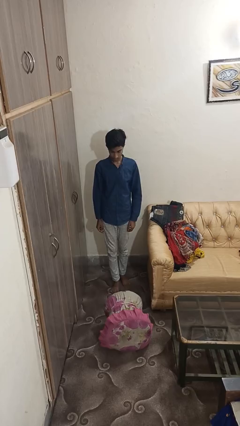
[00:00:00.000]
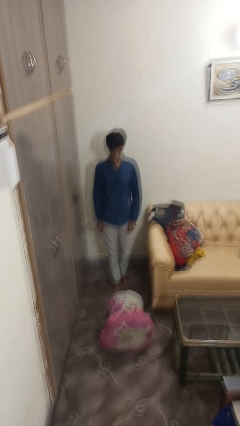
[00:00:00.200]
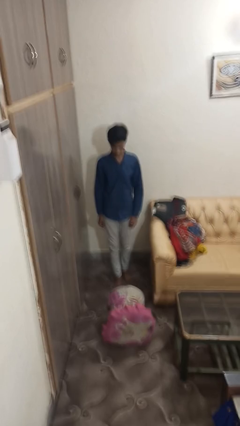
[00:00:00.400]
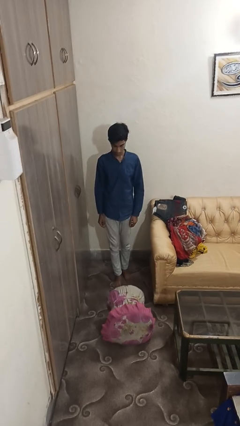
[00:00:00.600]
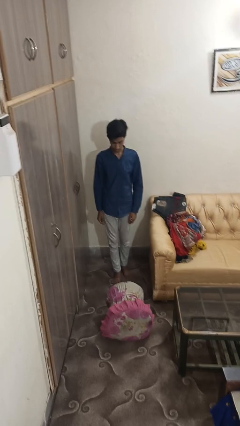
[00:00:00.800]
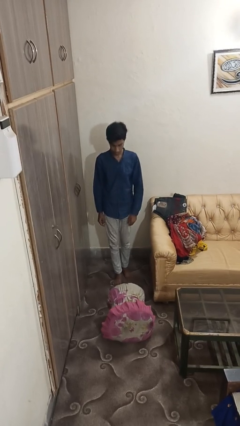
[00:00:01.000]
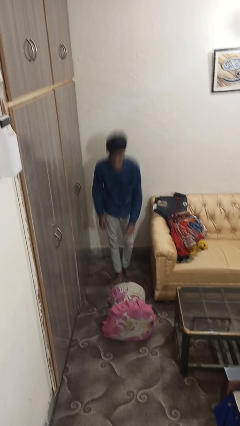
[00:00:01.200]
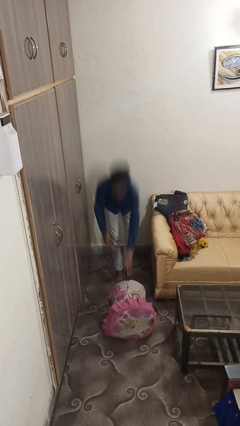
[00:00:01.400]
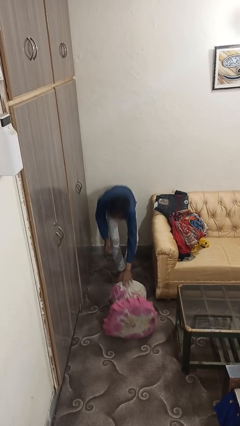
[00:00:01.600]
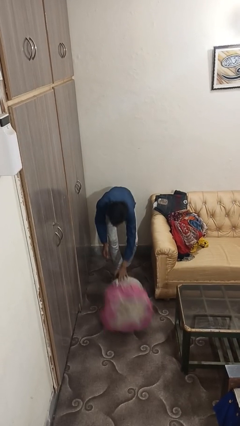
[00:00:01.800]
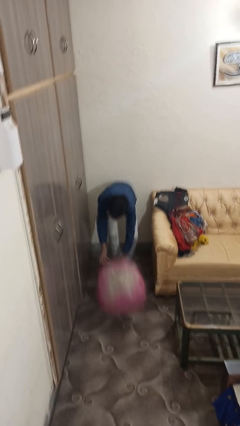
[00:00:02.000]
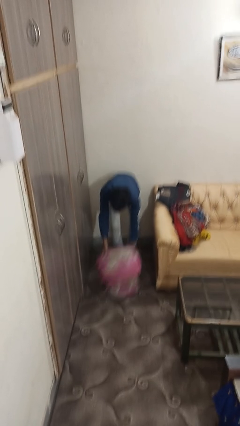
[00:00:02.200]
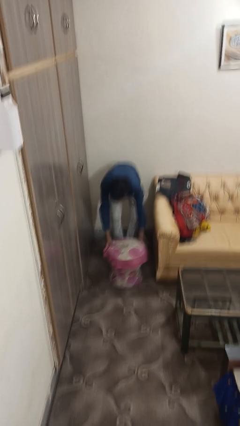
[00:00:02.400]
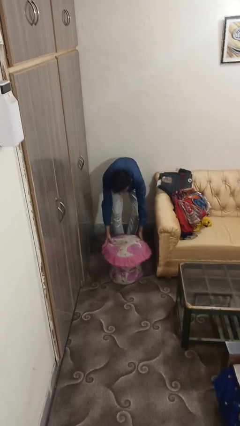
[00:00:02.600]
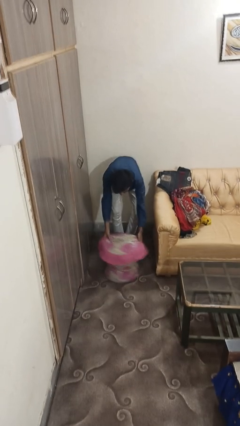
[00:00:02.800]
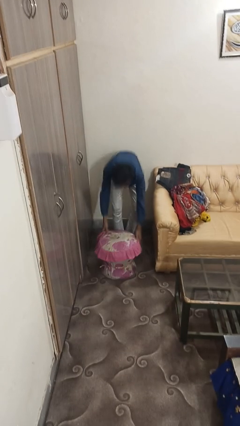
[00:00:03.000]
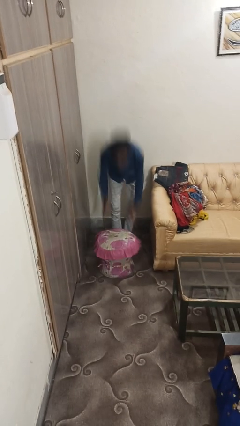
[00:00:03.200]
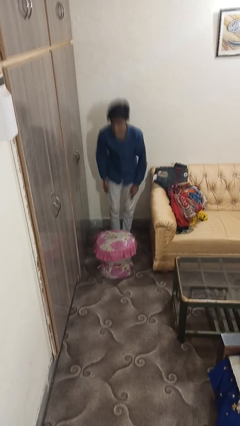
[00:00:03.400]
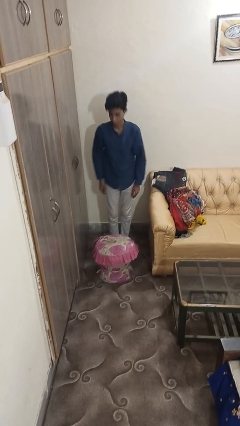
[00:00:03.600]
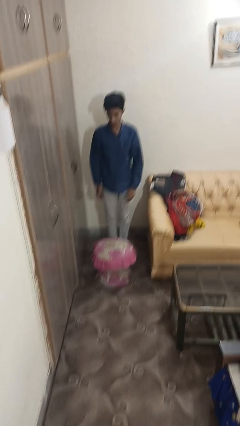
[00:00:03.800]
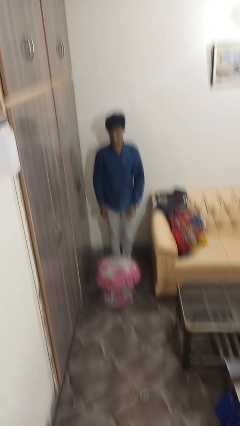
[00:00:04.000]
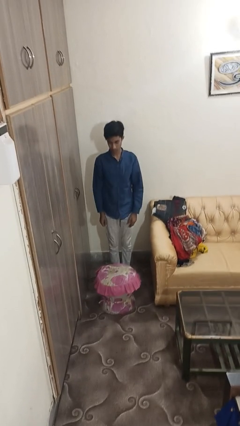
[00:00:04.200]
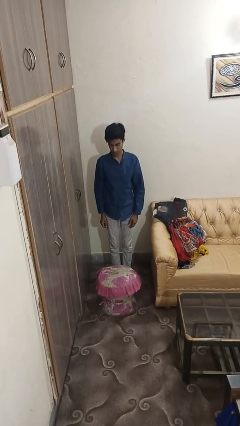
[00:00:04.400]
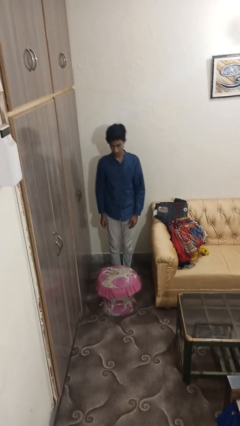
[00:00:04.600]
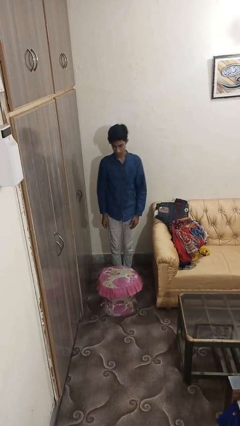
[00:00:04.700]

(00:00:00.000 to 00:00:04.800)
person sets upright furniture

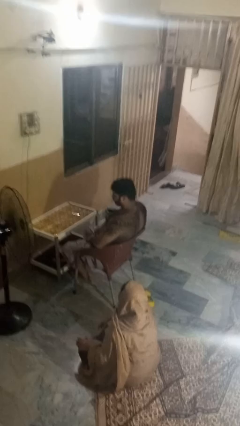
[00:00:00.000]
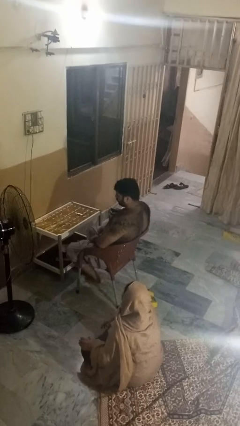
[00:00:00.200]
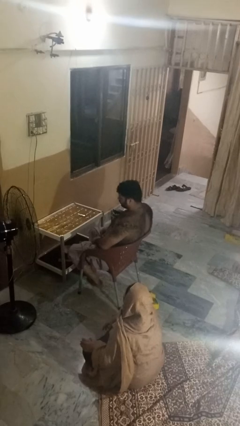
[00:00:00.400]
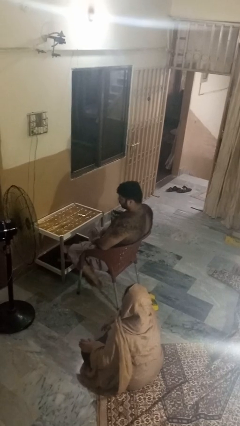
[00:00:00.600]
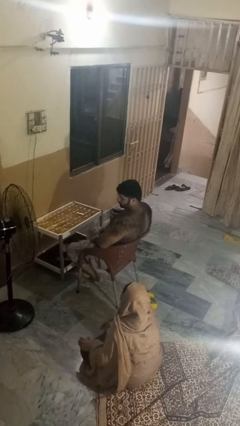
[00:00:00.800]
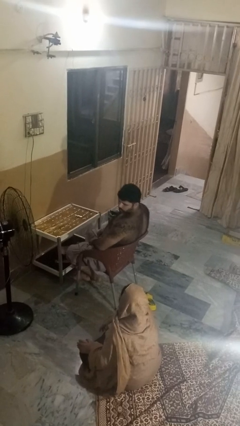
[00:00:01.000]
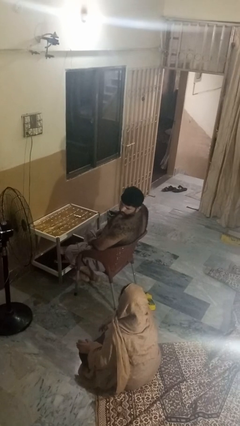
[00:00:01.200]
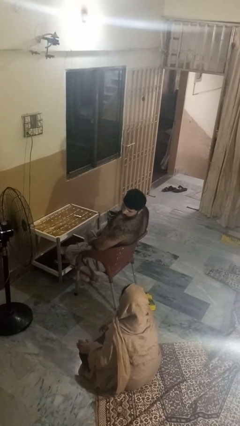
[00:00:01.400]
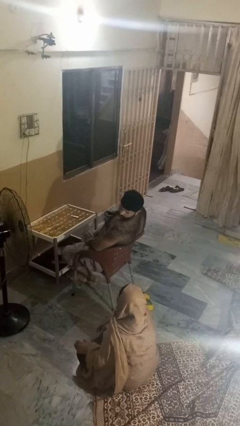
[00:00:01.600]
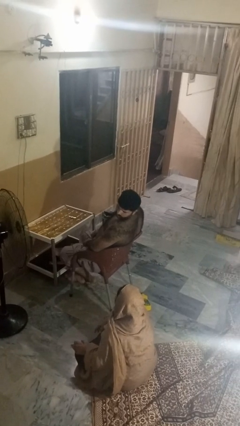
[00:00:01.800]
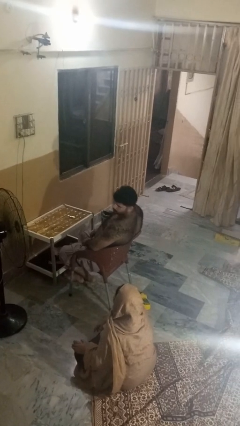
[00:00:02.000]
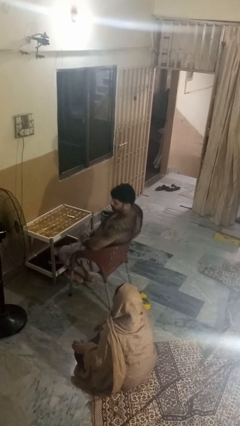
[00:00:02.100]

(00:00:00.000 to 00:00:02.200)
person looks over shoulder

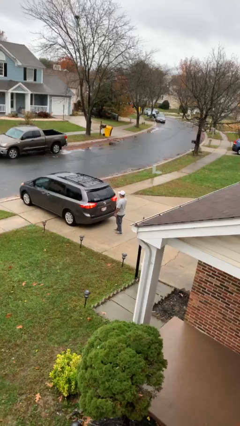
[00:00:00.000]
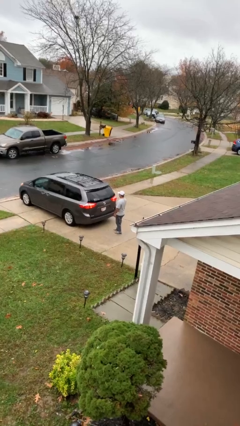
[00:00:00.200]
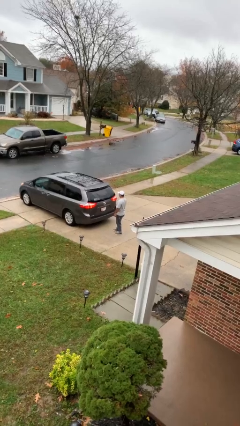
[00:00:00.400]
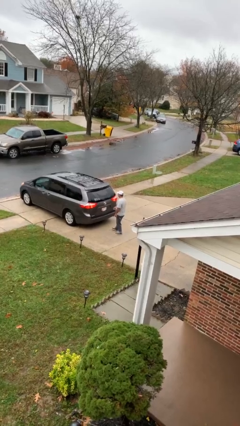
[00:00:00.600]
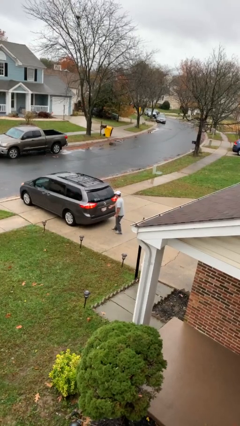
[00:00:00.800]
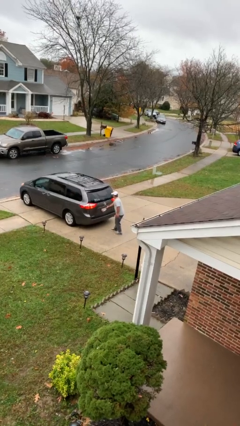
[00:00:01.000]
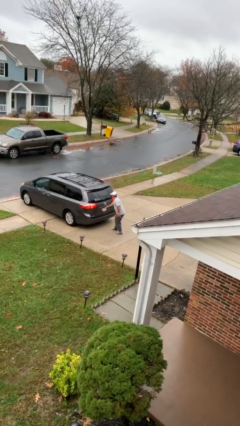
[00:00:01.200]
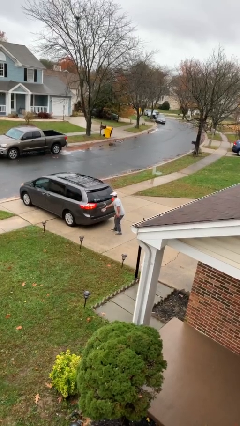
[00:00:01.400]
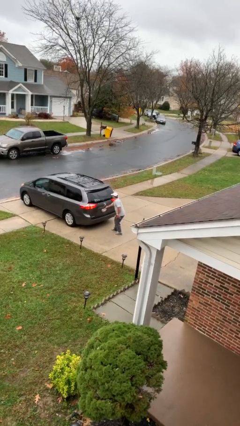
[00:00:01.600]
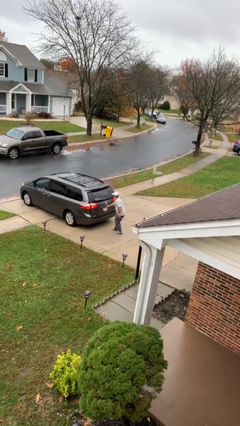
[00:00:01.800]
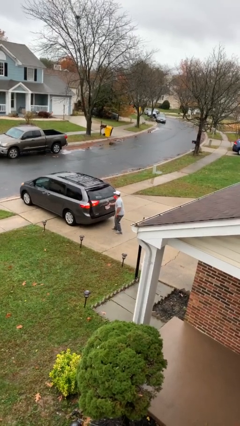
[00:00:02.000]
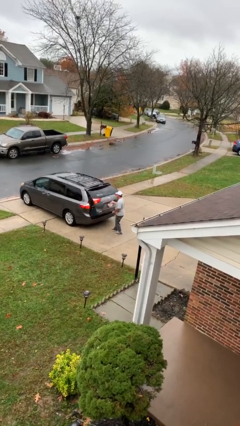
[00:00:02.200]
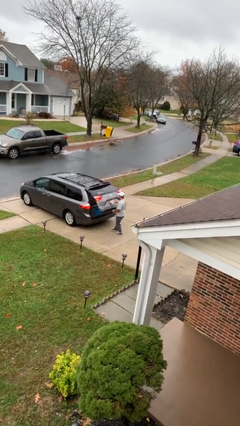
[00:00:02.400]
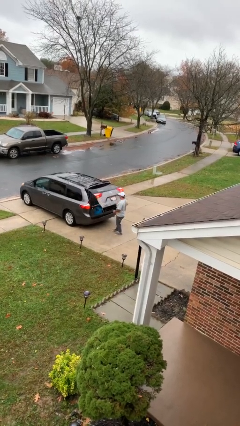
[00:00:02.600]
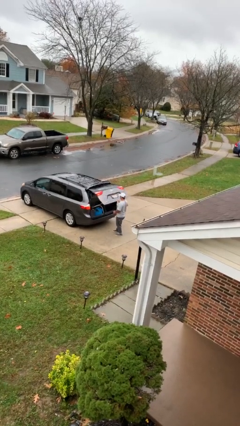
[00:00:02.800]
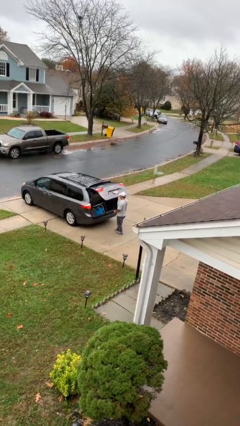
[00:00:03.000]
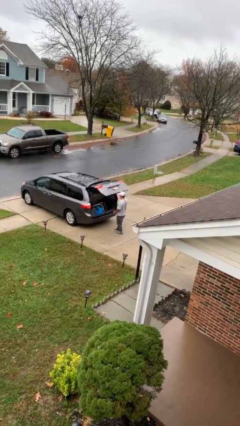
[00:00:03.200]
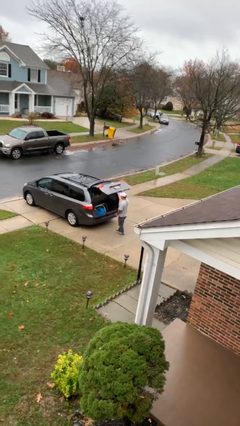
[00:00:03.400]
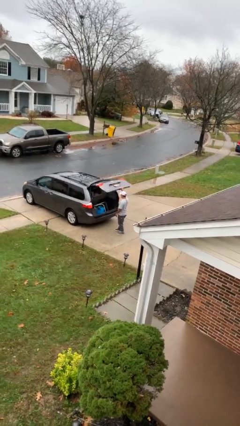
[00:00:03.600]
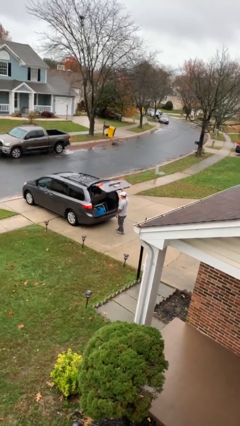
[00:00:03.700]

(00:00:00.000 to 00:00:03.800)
person opens car trunk

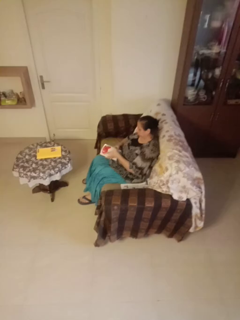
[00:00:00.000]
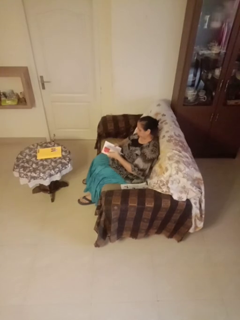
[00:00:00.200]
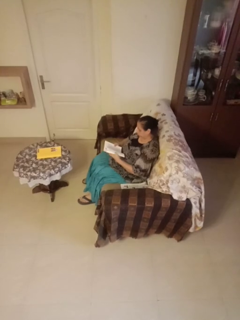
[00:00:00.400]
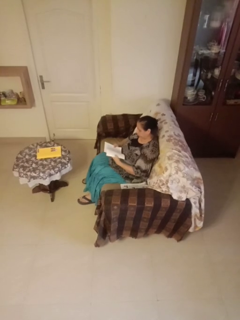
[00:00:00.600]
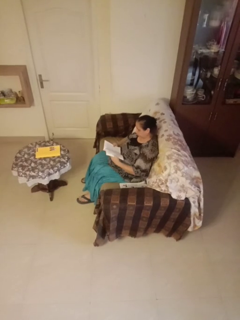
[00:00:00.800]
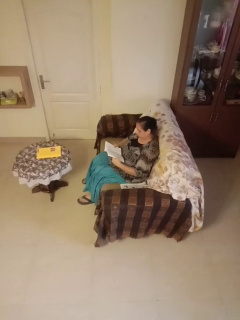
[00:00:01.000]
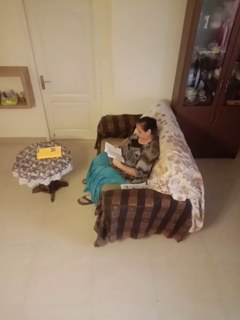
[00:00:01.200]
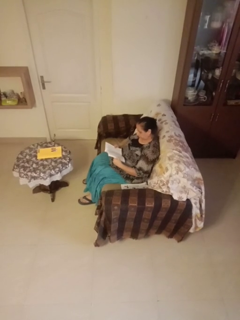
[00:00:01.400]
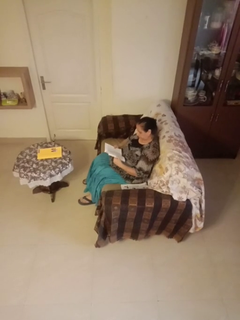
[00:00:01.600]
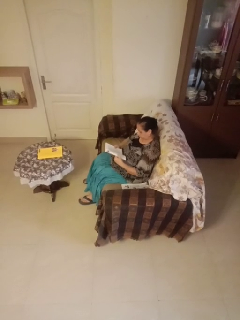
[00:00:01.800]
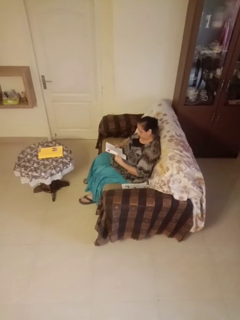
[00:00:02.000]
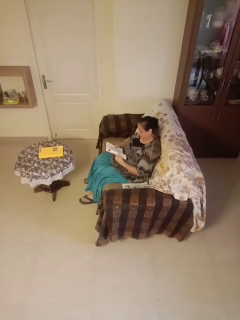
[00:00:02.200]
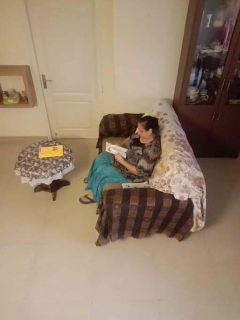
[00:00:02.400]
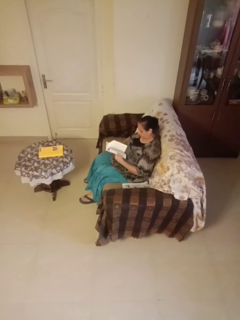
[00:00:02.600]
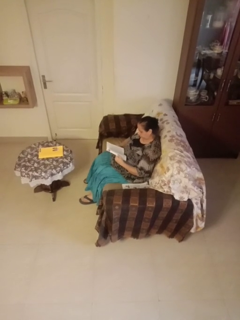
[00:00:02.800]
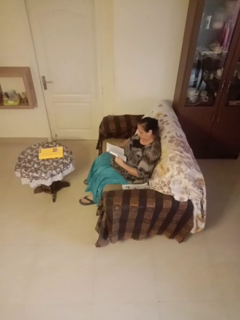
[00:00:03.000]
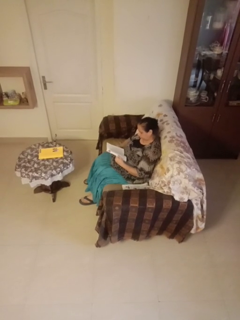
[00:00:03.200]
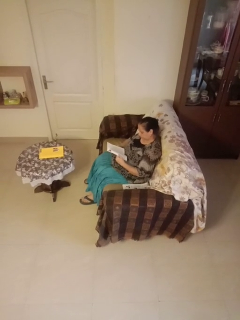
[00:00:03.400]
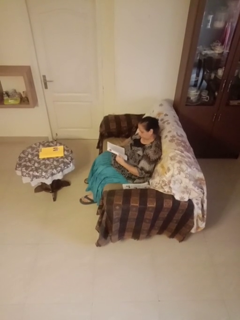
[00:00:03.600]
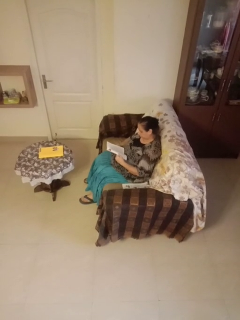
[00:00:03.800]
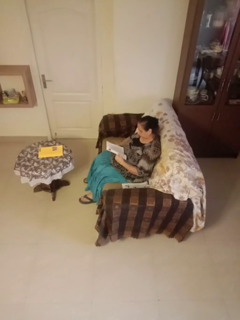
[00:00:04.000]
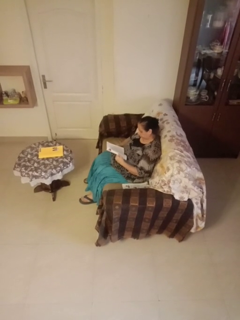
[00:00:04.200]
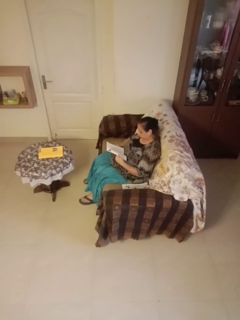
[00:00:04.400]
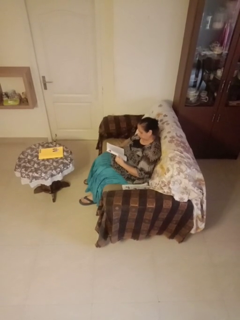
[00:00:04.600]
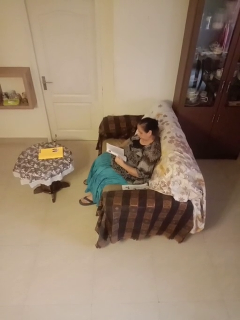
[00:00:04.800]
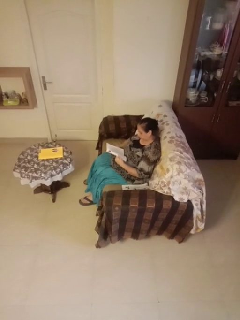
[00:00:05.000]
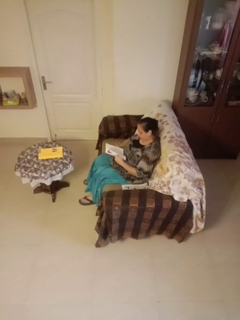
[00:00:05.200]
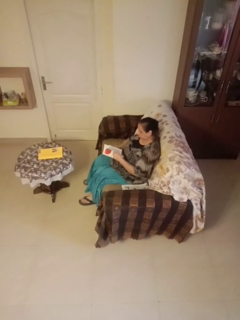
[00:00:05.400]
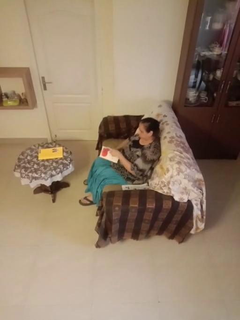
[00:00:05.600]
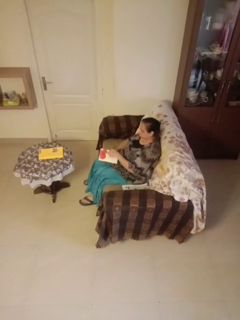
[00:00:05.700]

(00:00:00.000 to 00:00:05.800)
person reads book

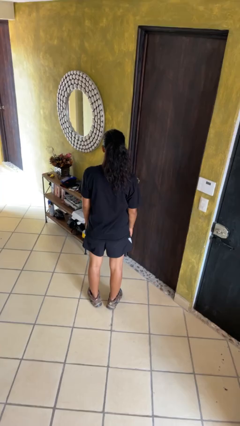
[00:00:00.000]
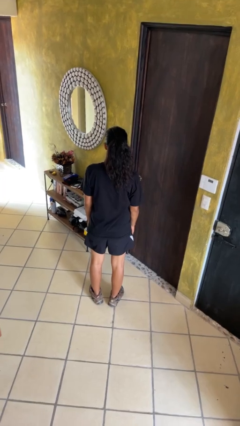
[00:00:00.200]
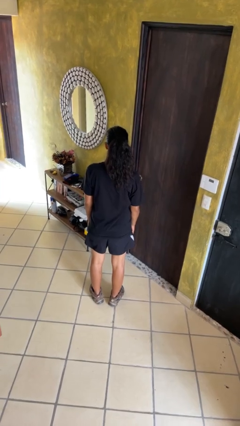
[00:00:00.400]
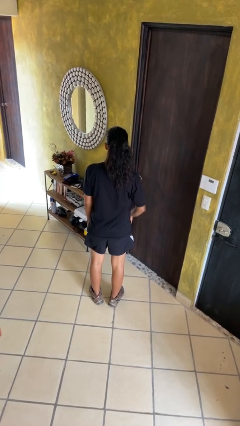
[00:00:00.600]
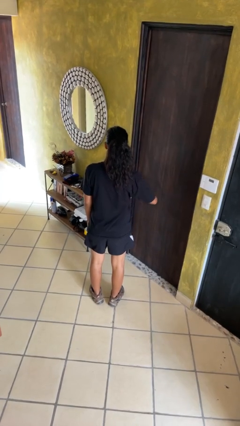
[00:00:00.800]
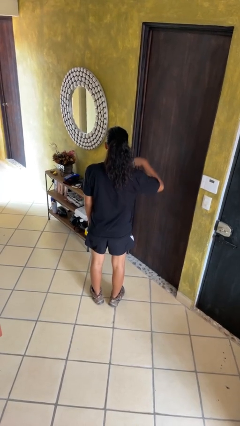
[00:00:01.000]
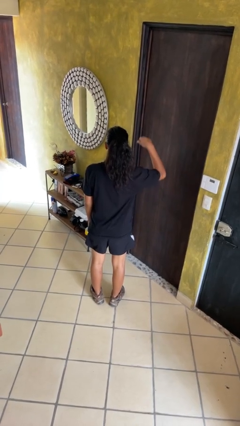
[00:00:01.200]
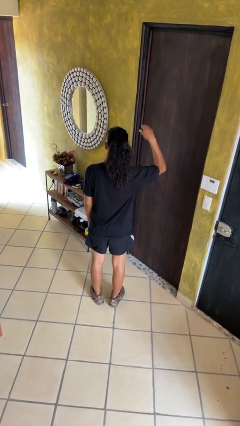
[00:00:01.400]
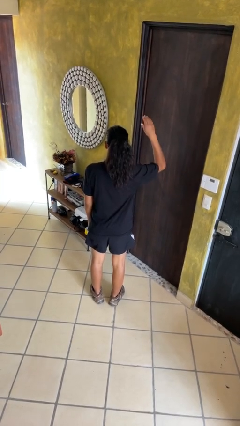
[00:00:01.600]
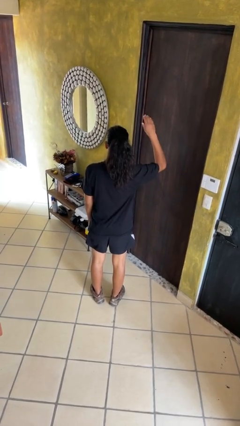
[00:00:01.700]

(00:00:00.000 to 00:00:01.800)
person gestures swipe up

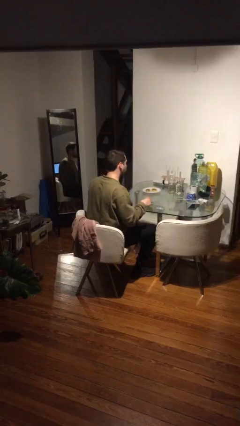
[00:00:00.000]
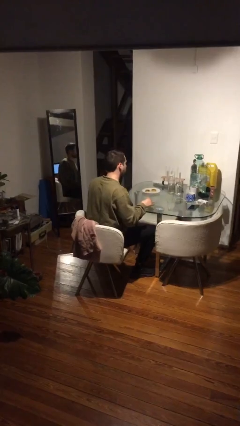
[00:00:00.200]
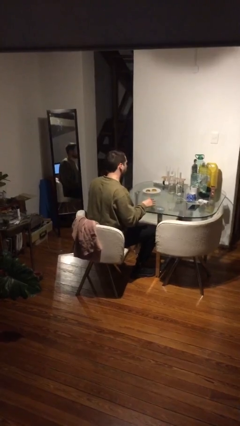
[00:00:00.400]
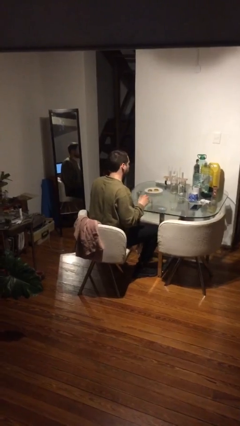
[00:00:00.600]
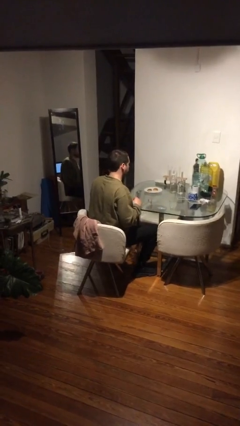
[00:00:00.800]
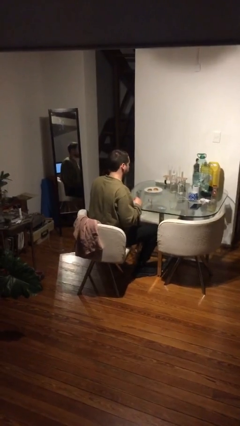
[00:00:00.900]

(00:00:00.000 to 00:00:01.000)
person puts down object on table
